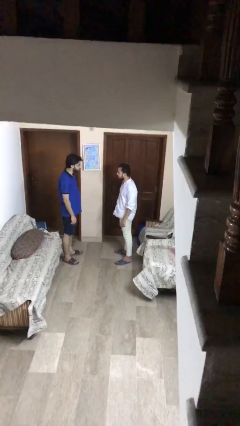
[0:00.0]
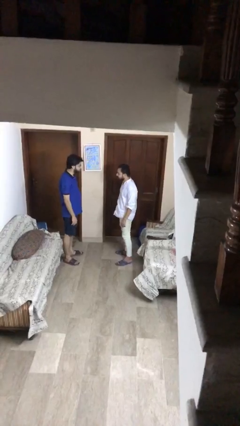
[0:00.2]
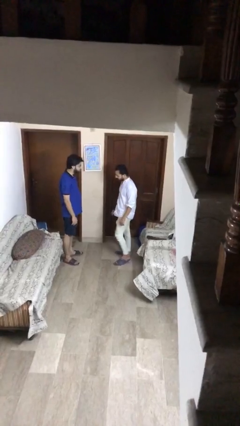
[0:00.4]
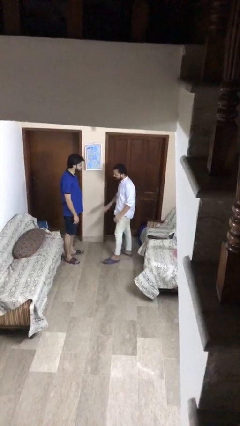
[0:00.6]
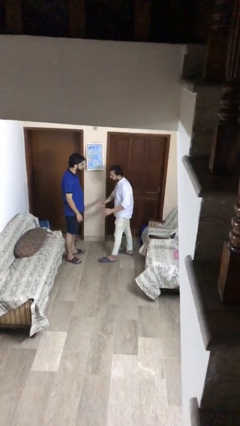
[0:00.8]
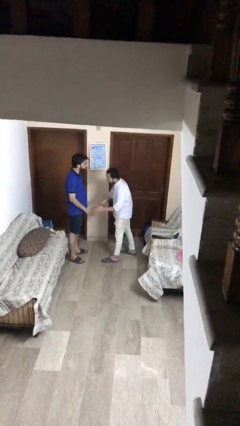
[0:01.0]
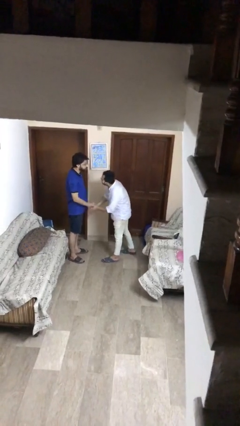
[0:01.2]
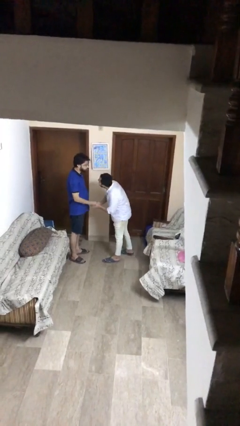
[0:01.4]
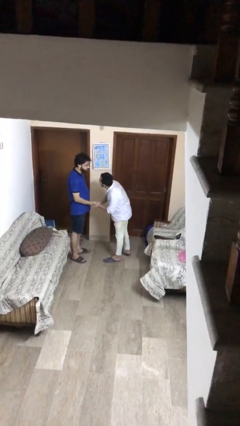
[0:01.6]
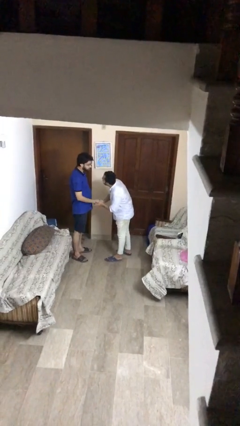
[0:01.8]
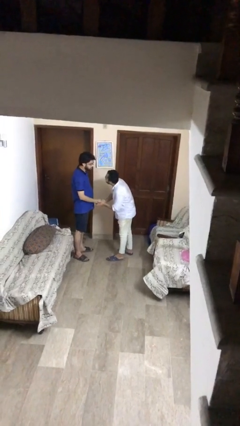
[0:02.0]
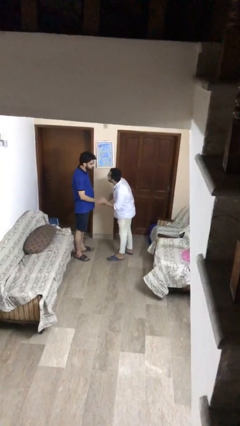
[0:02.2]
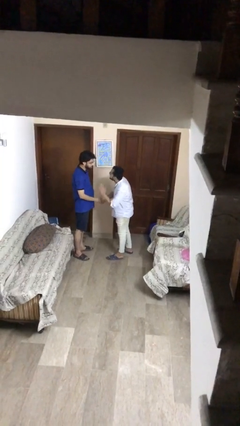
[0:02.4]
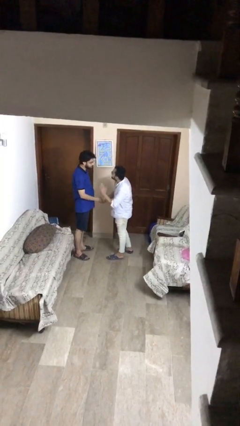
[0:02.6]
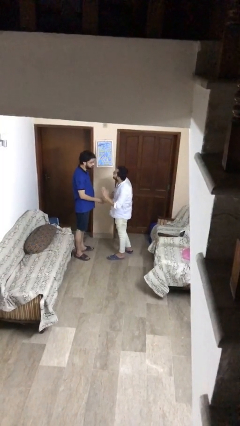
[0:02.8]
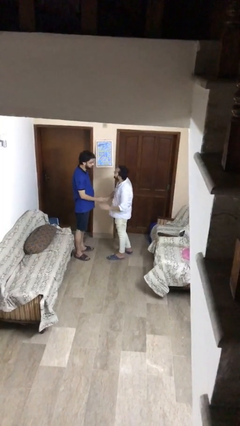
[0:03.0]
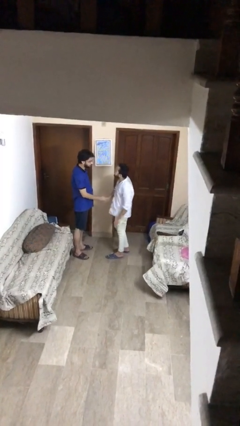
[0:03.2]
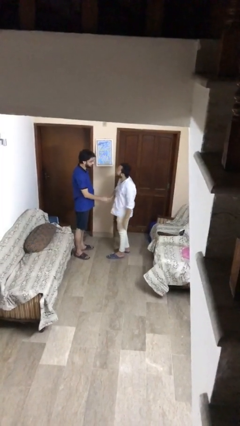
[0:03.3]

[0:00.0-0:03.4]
person shakes hand

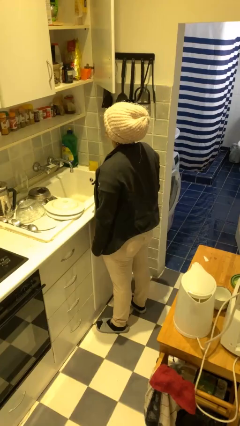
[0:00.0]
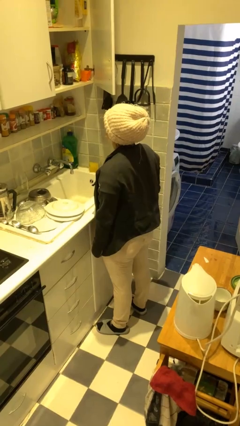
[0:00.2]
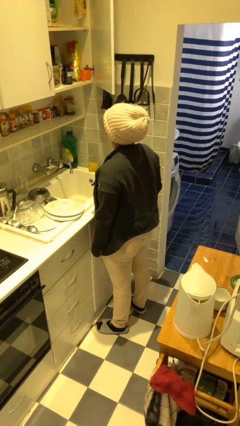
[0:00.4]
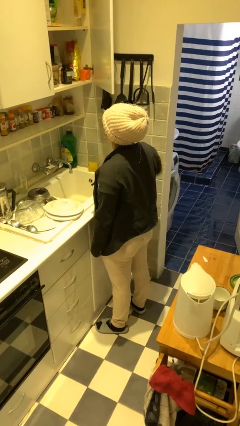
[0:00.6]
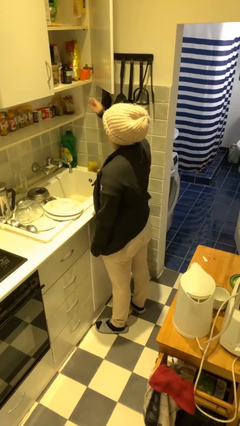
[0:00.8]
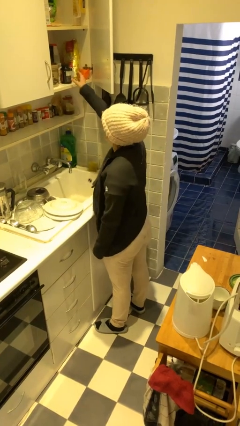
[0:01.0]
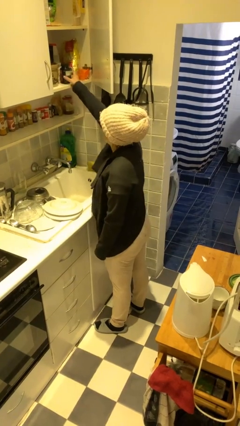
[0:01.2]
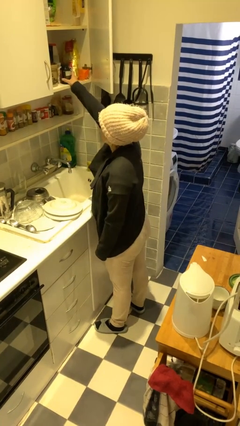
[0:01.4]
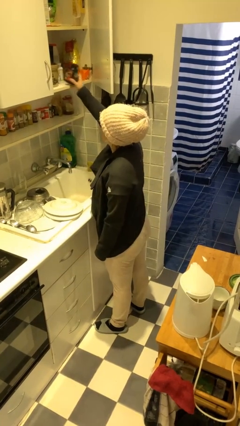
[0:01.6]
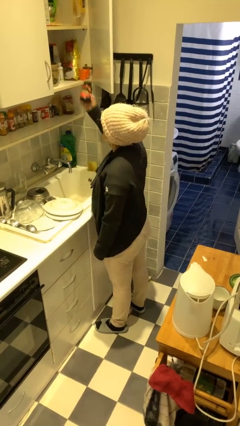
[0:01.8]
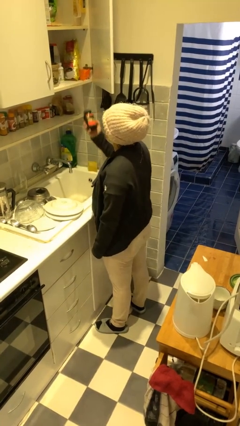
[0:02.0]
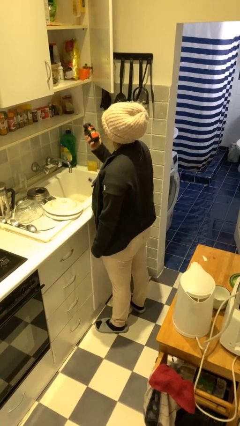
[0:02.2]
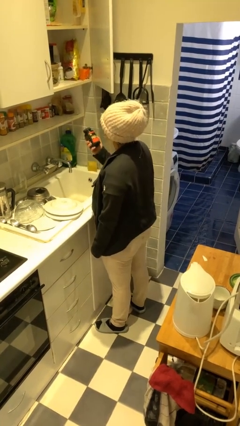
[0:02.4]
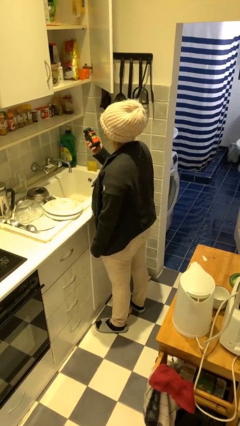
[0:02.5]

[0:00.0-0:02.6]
person picks up object from cabinet

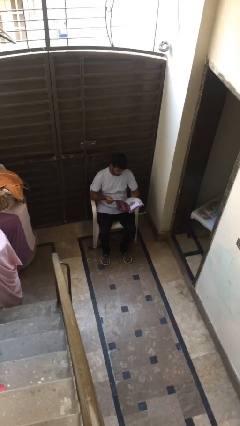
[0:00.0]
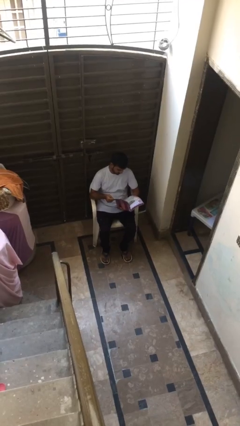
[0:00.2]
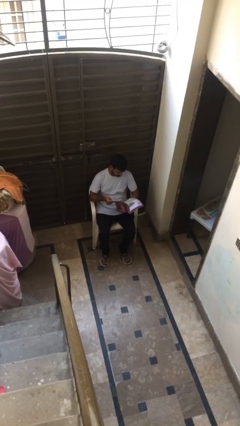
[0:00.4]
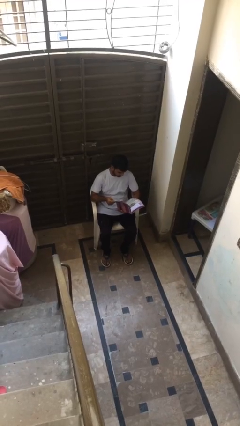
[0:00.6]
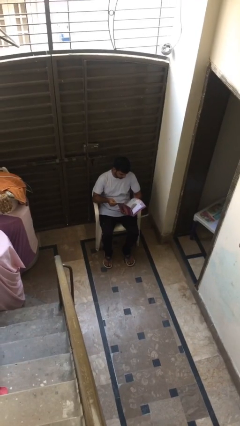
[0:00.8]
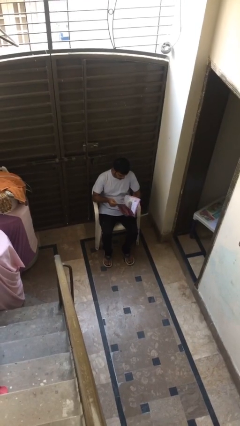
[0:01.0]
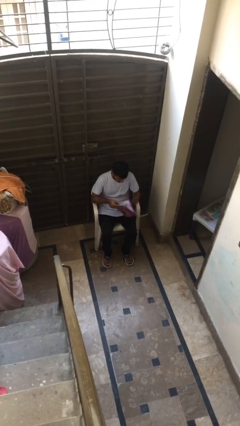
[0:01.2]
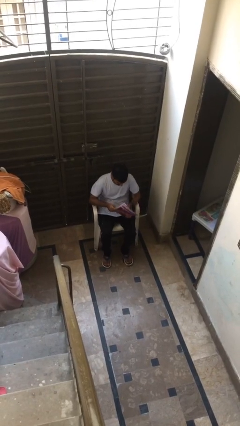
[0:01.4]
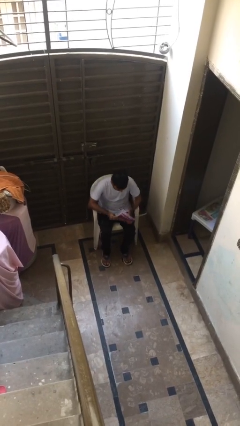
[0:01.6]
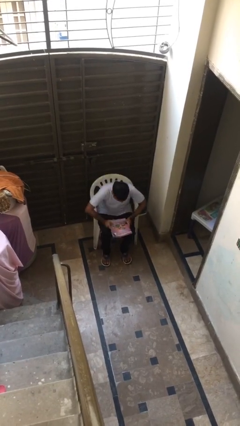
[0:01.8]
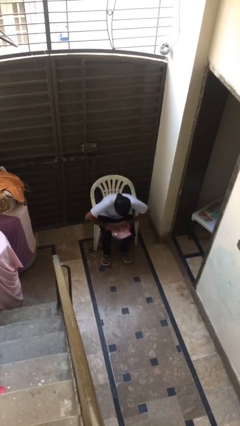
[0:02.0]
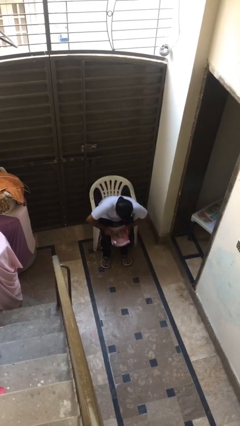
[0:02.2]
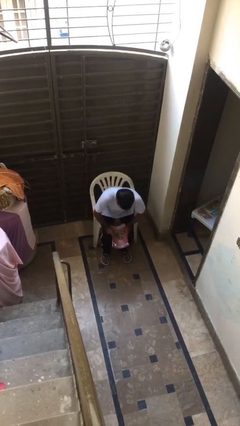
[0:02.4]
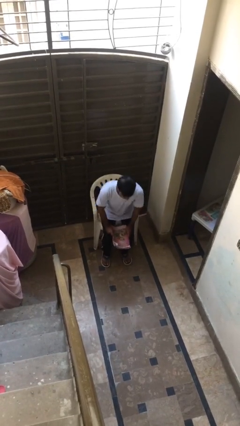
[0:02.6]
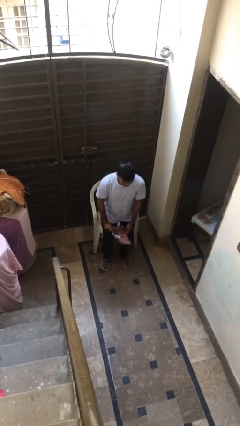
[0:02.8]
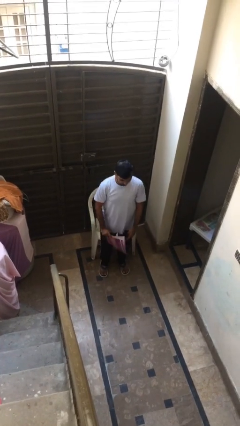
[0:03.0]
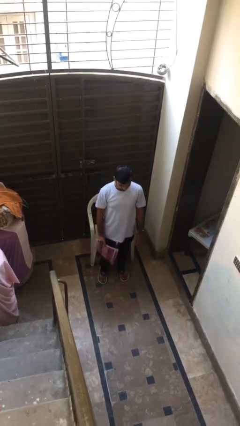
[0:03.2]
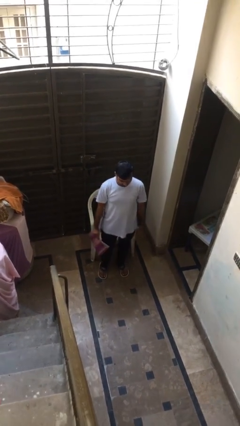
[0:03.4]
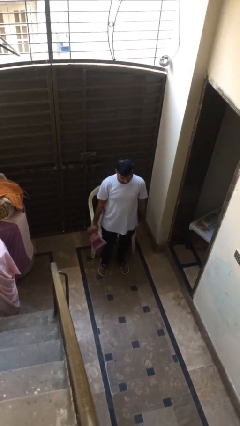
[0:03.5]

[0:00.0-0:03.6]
person stands up

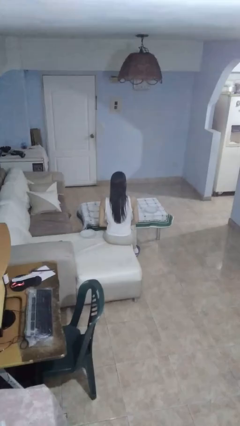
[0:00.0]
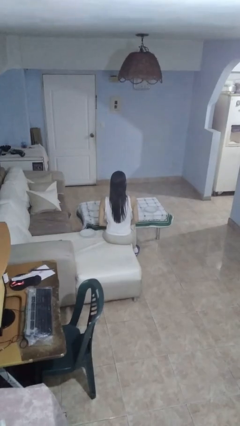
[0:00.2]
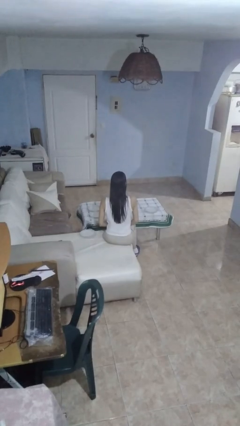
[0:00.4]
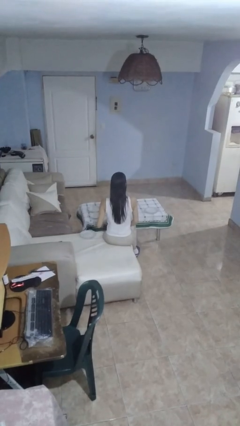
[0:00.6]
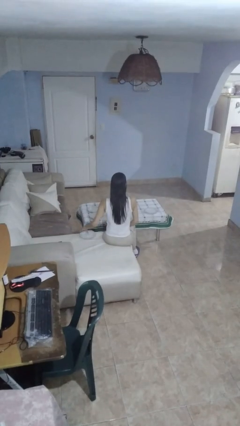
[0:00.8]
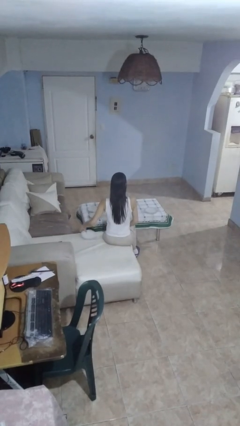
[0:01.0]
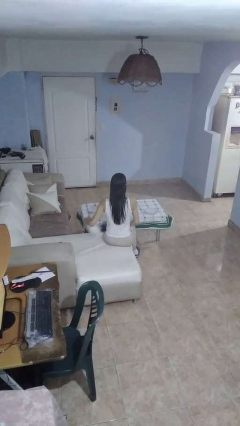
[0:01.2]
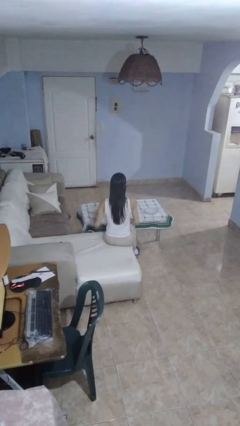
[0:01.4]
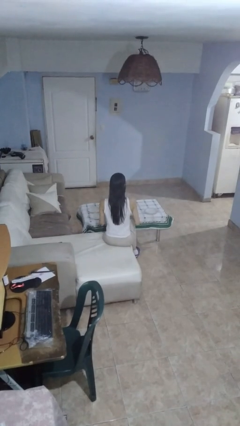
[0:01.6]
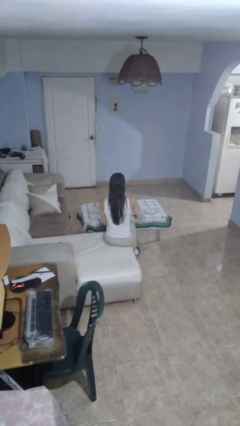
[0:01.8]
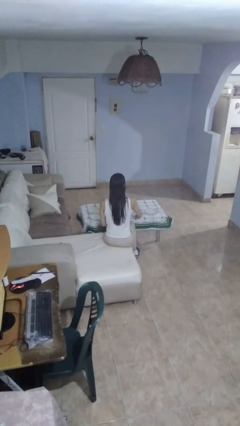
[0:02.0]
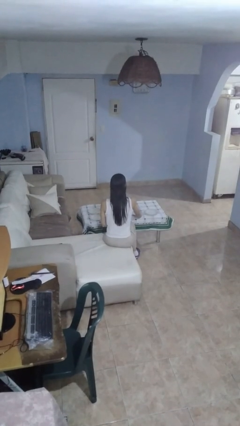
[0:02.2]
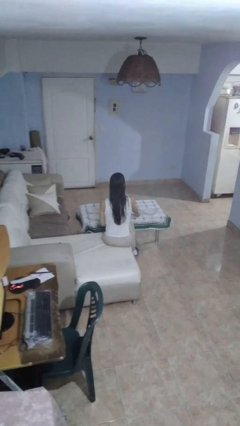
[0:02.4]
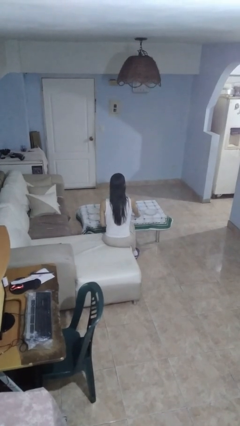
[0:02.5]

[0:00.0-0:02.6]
person sets table

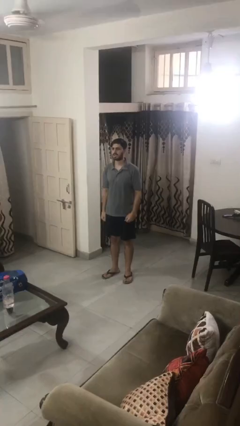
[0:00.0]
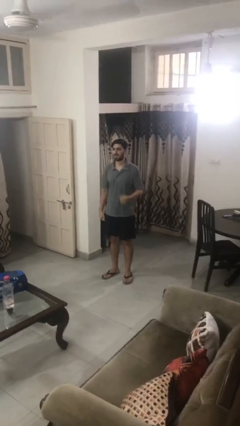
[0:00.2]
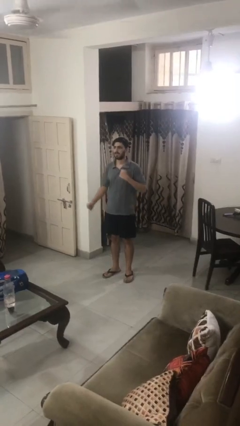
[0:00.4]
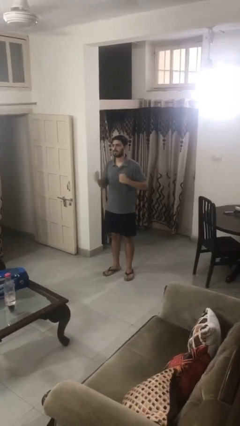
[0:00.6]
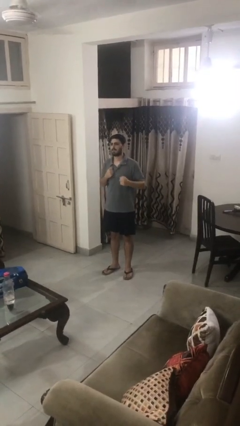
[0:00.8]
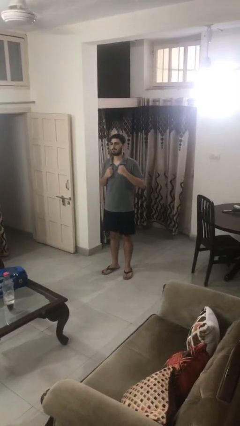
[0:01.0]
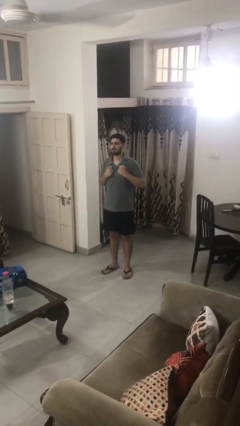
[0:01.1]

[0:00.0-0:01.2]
person drums on chest

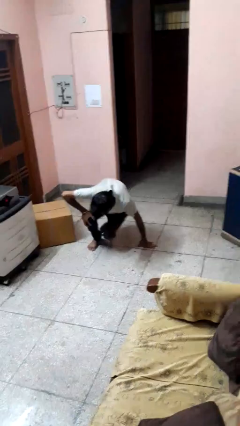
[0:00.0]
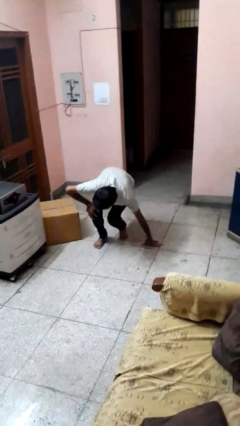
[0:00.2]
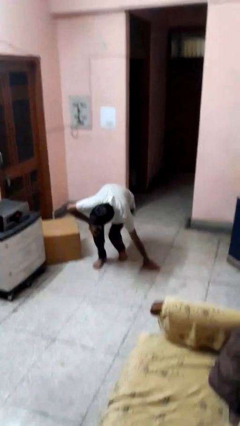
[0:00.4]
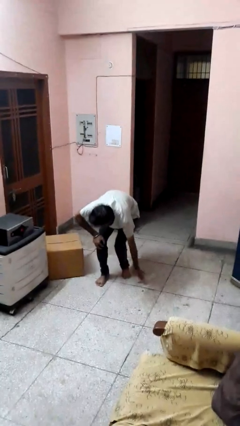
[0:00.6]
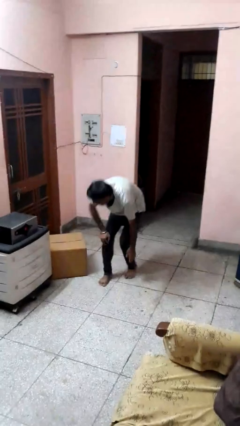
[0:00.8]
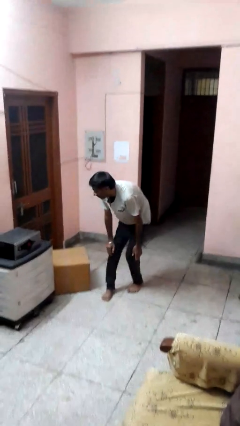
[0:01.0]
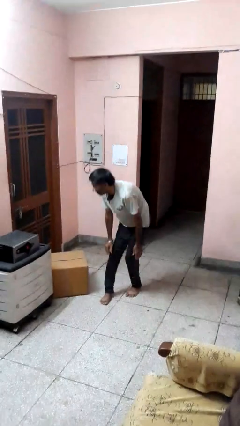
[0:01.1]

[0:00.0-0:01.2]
person stands up from floor

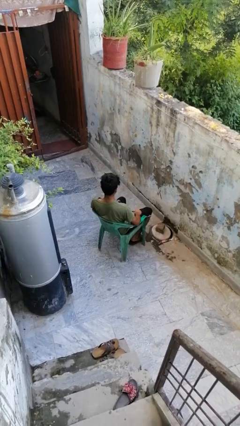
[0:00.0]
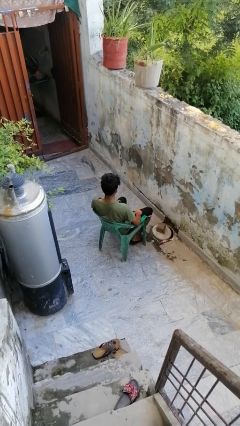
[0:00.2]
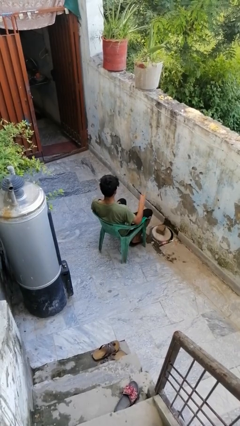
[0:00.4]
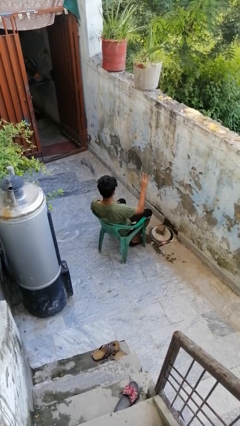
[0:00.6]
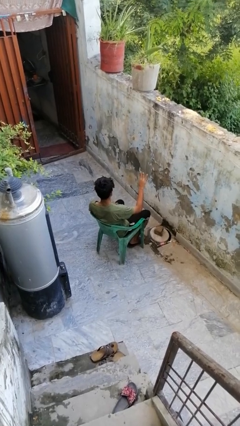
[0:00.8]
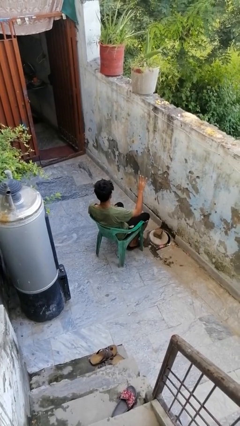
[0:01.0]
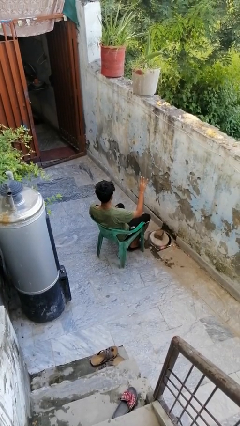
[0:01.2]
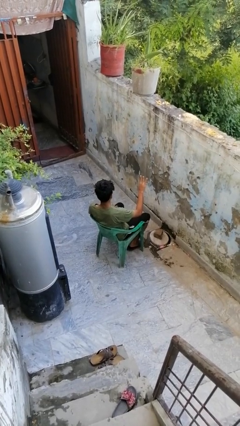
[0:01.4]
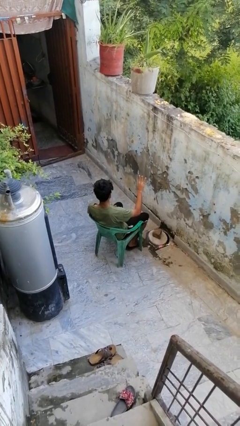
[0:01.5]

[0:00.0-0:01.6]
person gestures number three

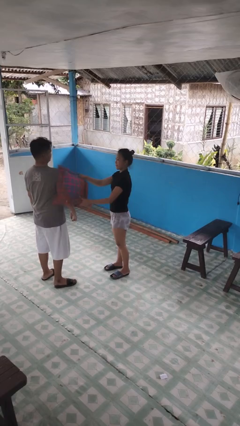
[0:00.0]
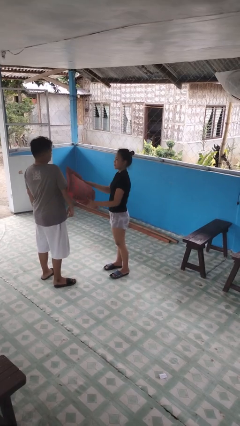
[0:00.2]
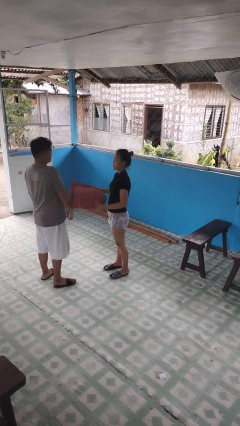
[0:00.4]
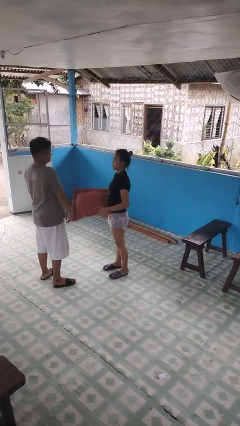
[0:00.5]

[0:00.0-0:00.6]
person hits person with pillow
